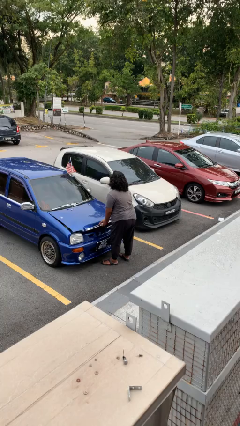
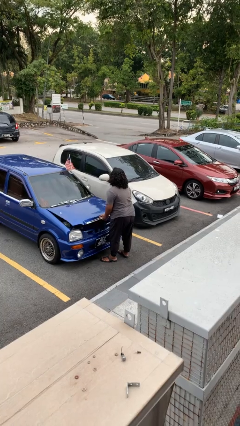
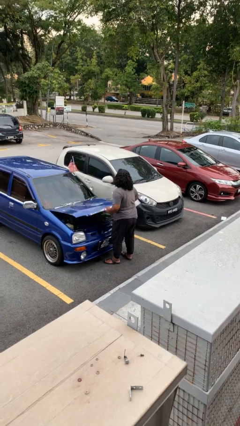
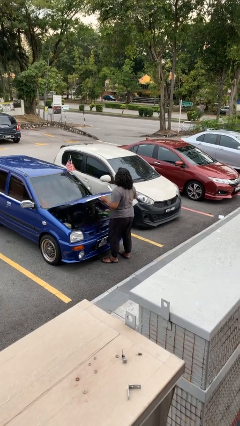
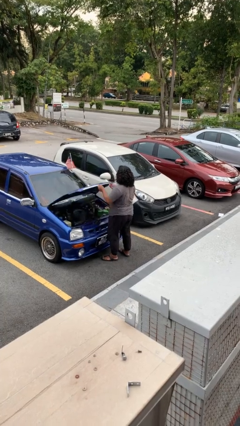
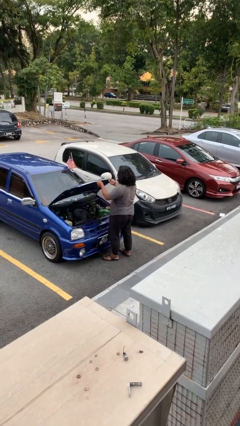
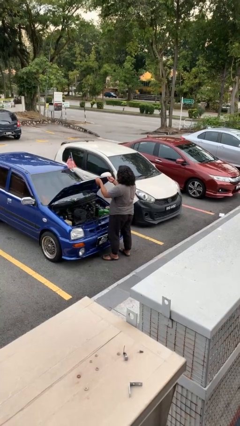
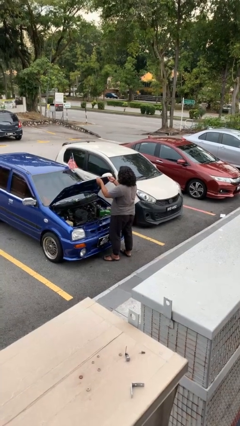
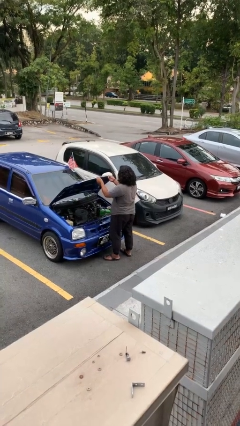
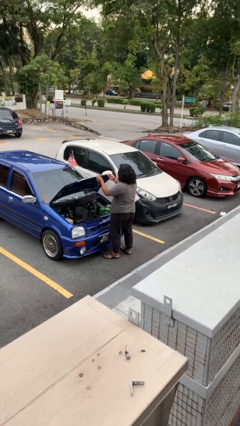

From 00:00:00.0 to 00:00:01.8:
person opens car hood

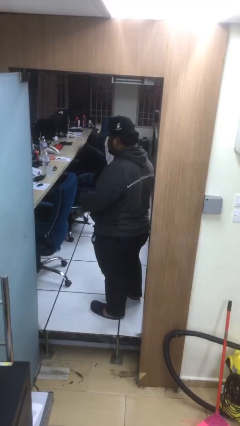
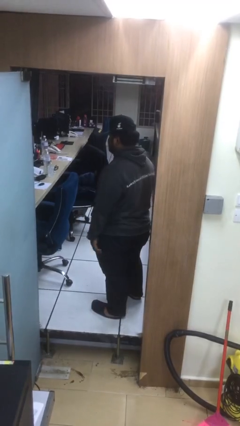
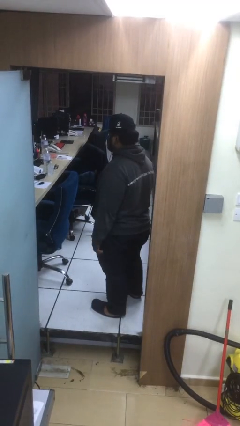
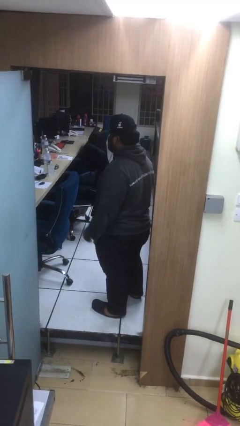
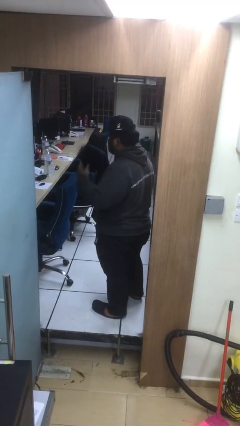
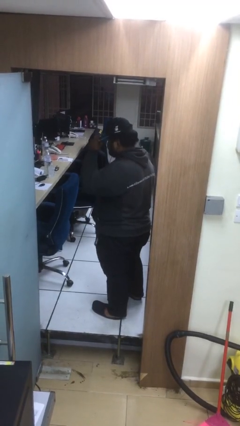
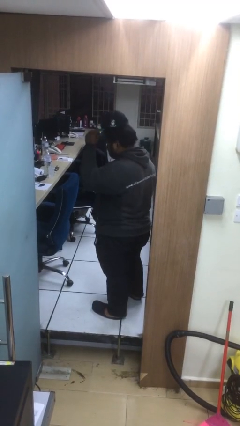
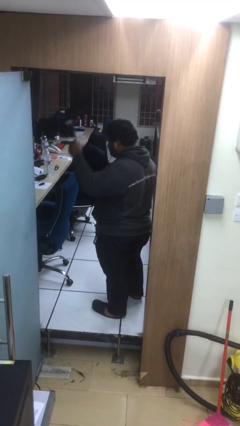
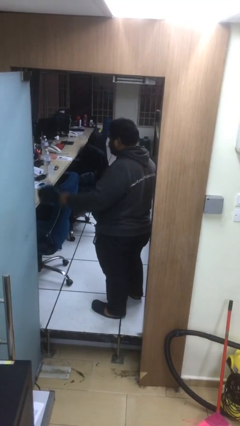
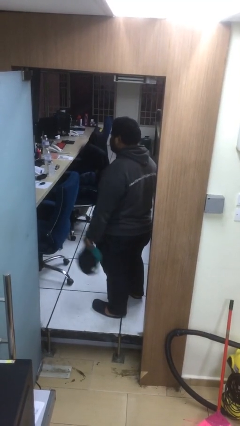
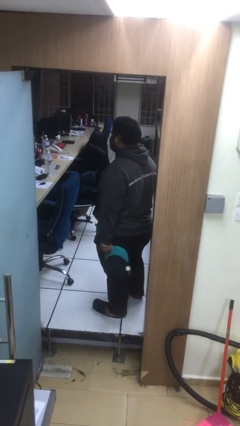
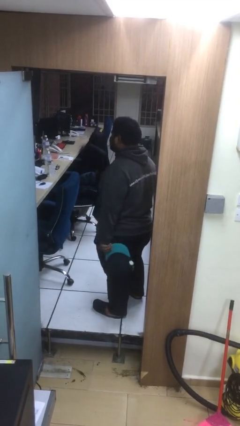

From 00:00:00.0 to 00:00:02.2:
person takes off hat

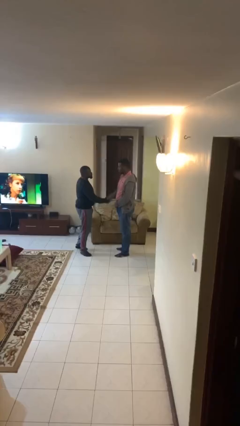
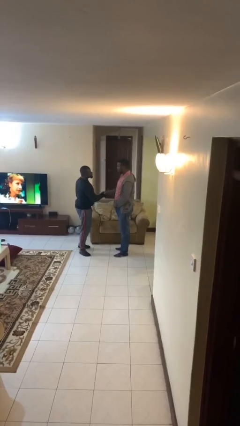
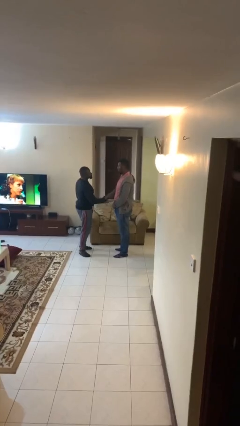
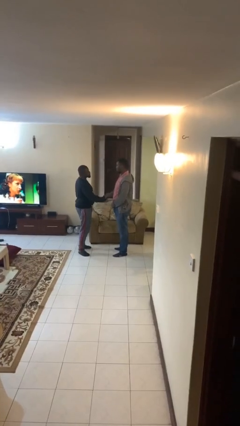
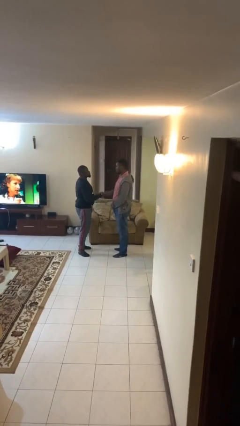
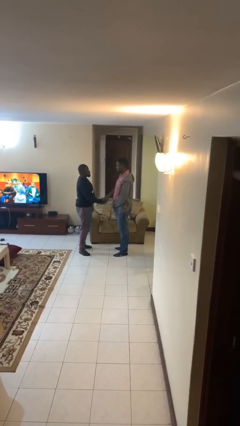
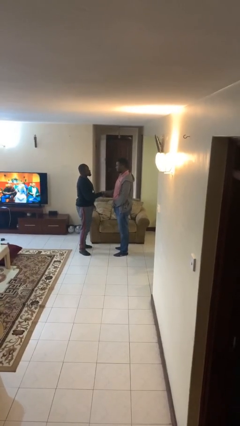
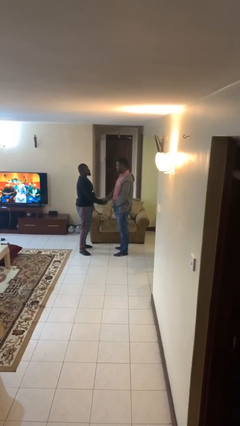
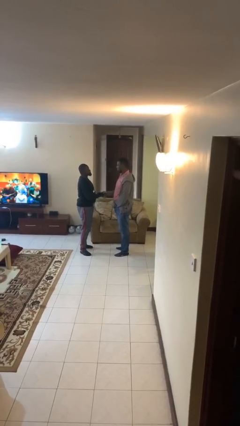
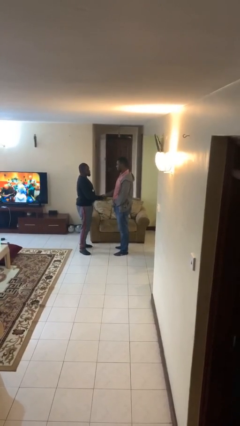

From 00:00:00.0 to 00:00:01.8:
person shakes hand

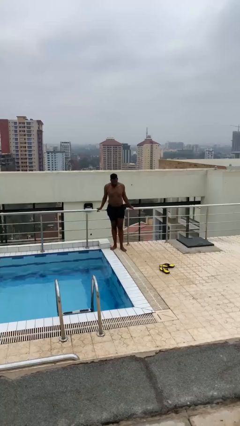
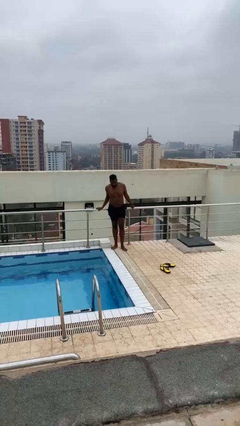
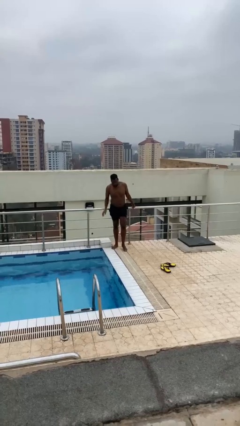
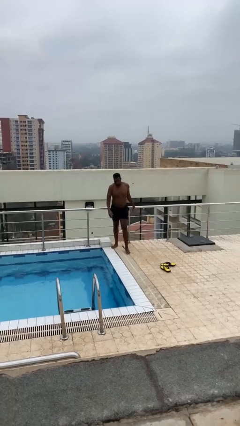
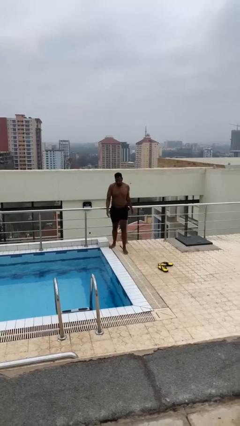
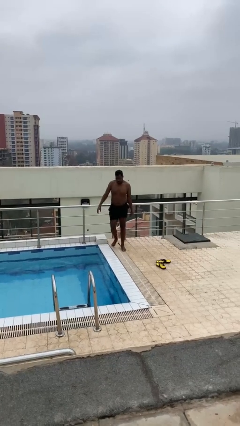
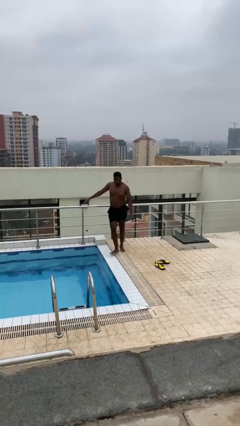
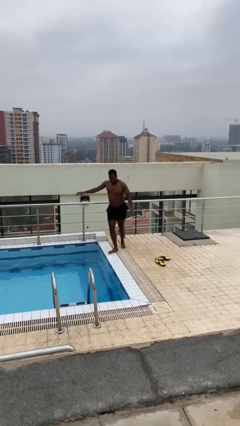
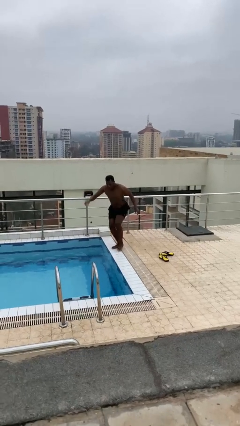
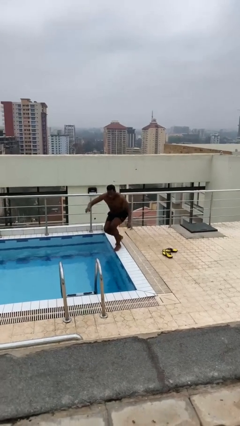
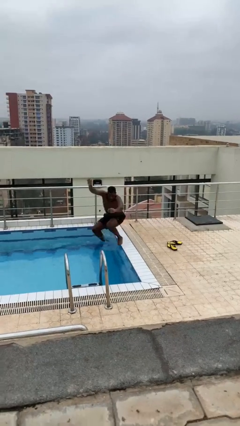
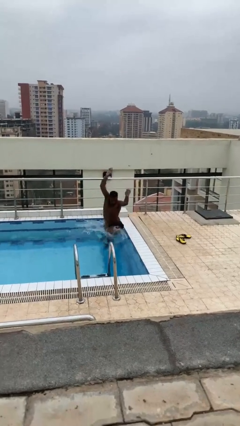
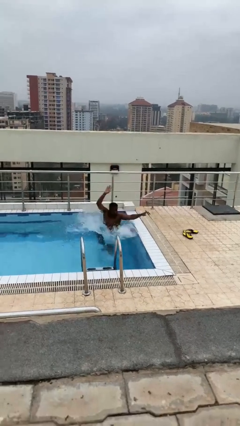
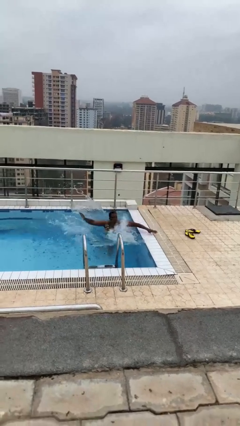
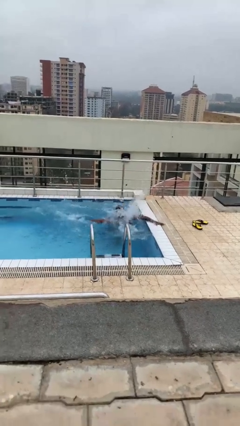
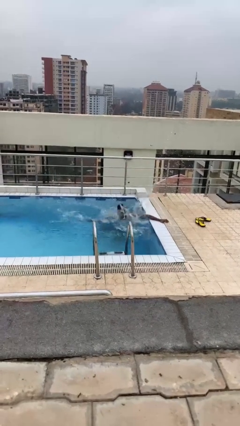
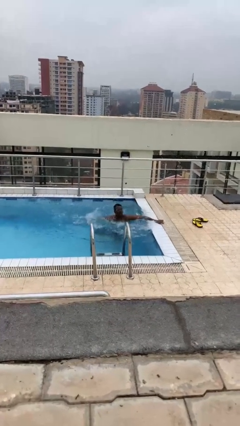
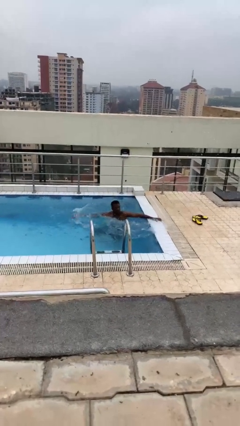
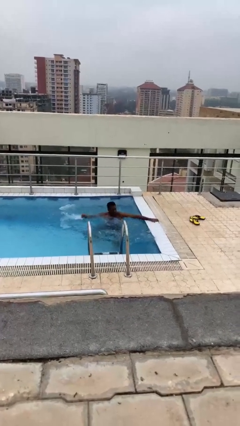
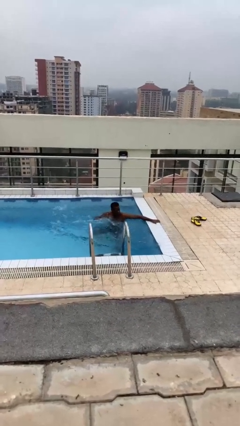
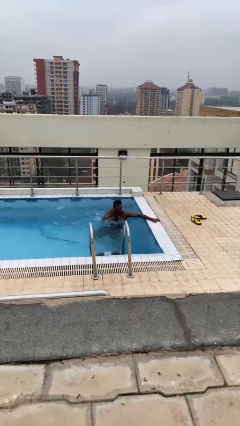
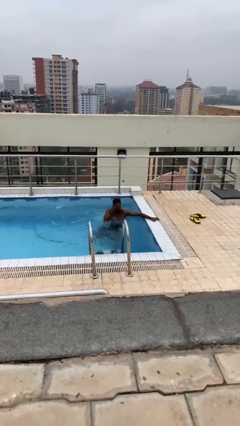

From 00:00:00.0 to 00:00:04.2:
person falls into pool

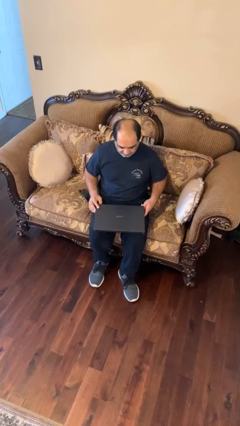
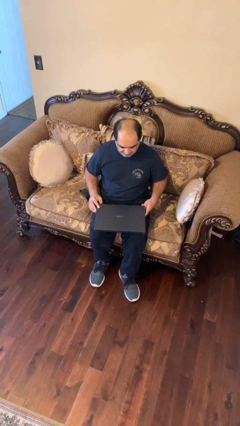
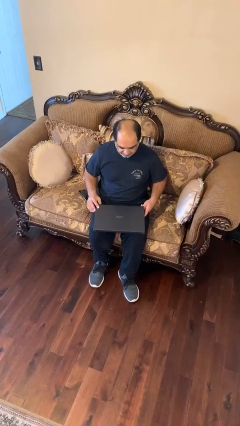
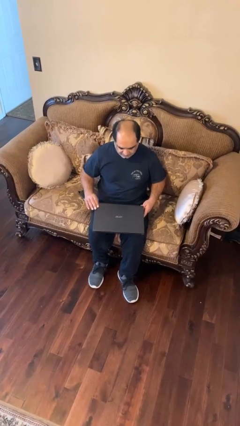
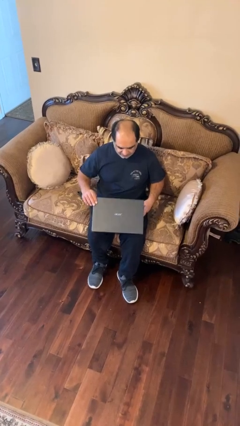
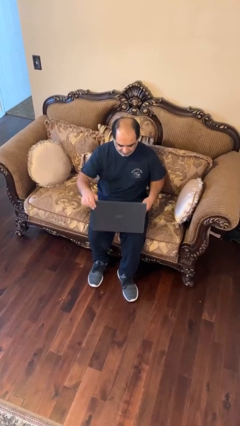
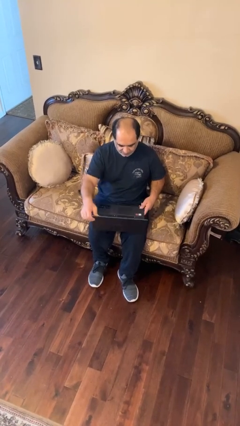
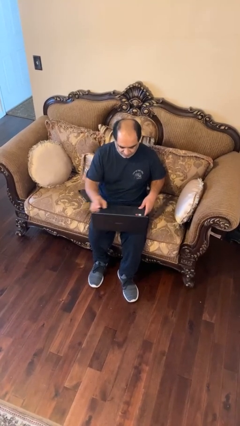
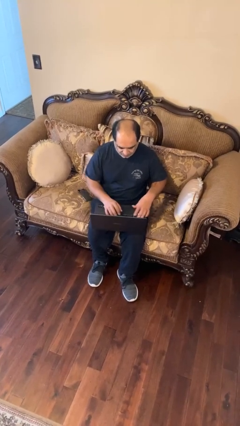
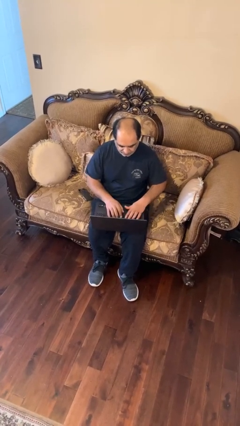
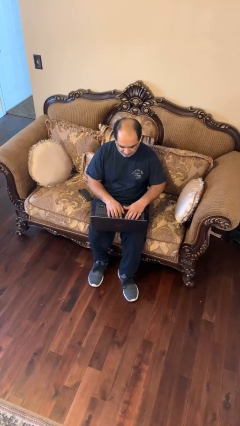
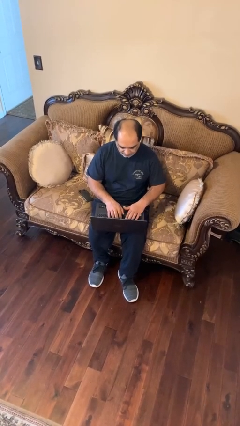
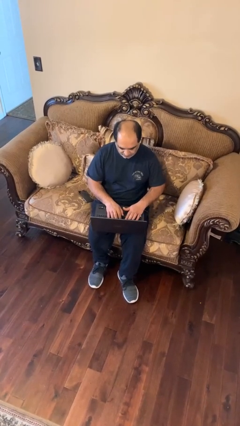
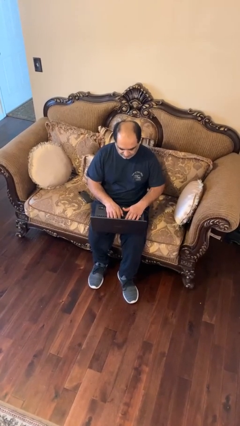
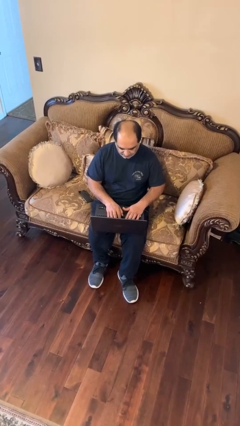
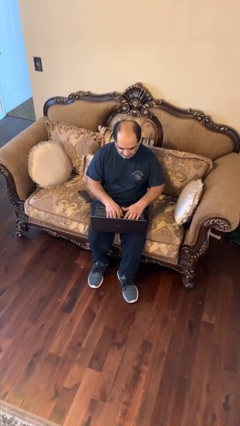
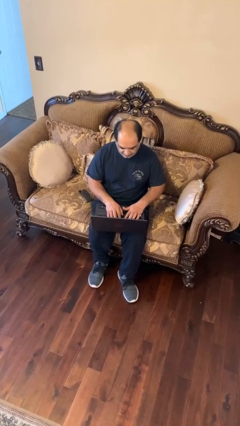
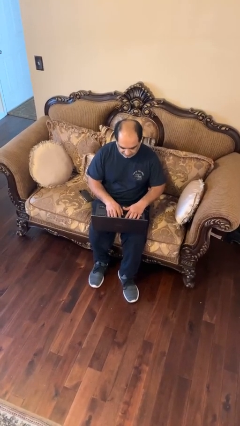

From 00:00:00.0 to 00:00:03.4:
person interacts with laptop

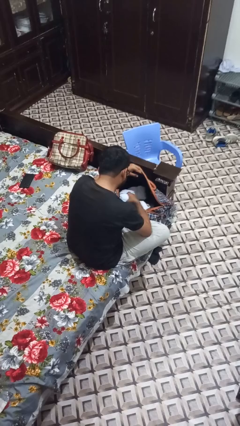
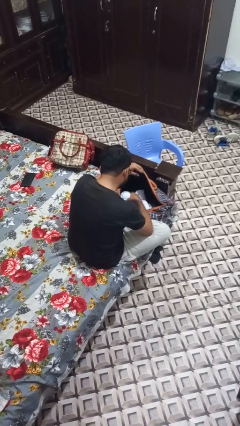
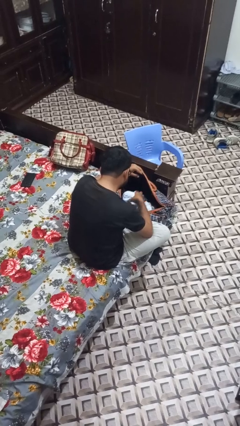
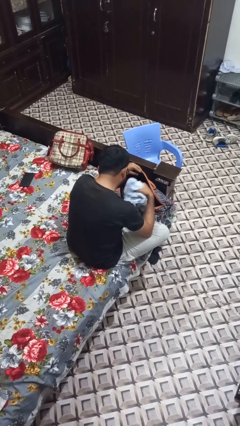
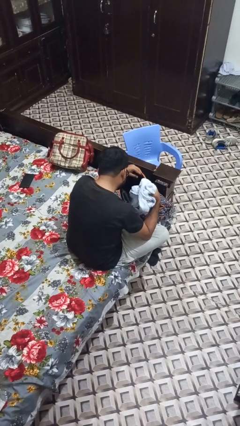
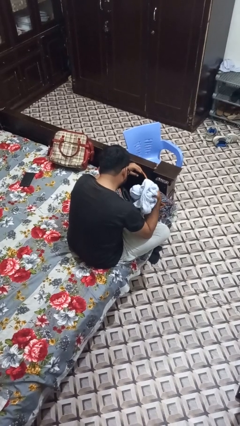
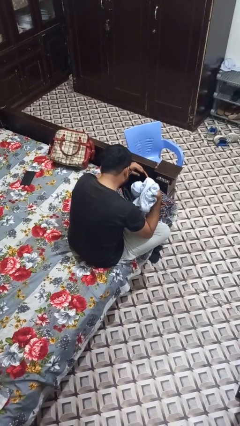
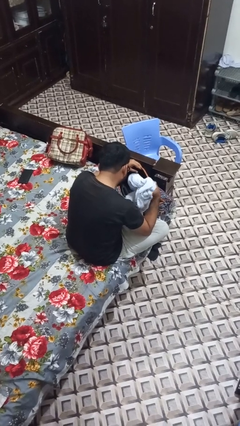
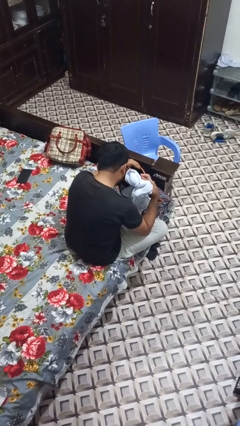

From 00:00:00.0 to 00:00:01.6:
person takes object from backpack

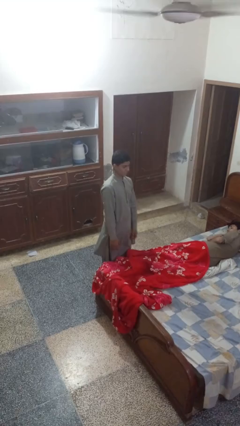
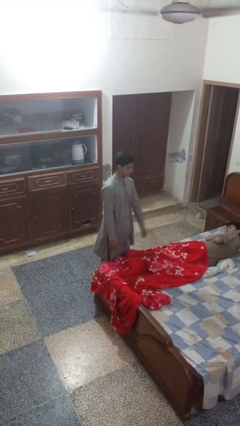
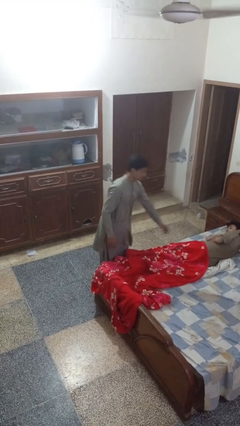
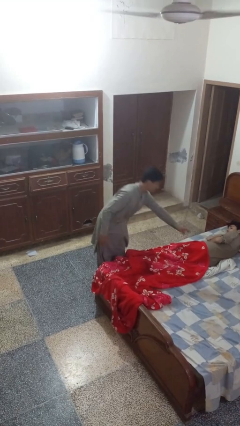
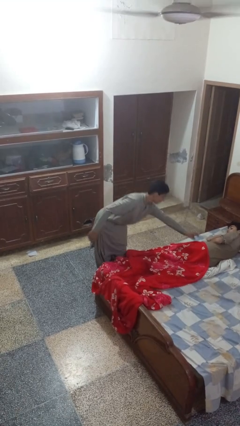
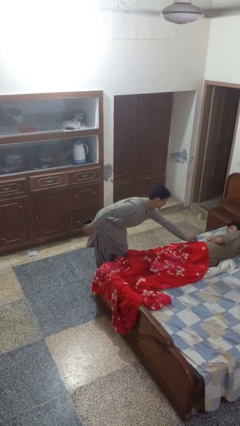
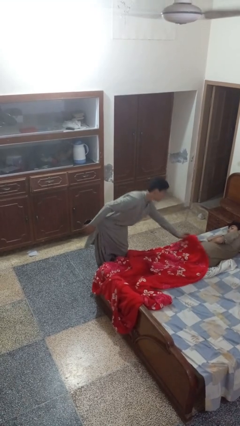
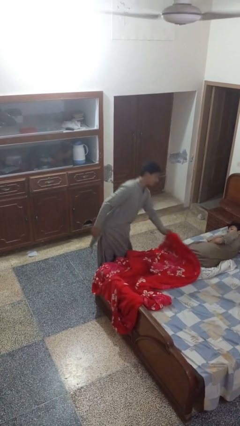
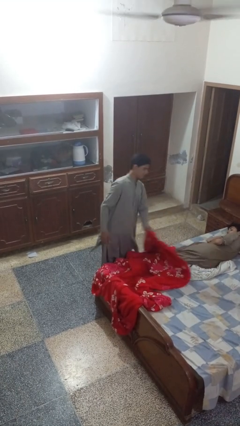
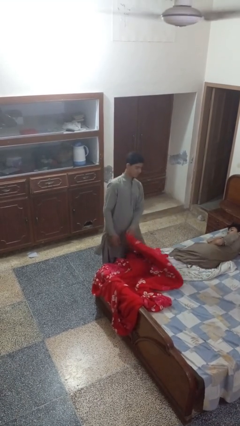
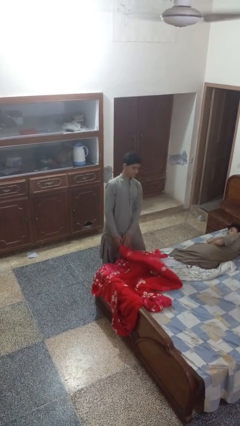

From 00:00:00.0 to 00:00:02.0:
person uncovers friend with blanket
